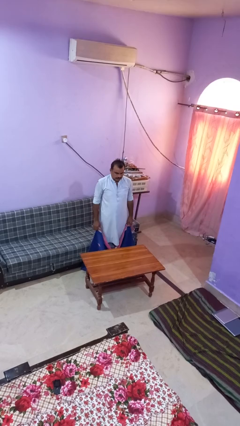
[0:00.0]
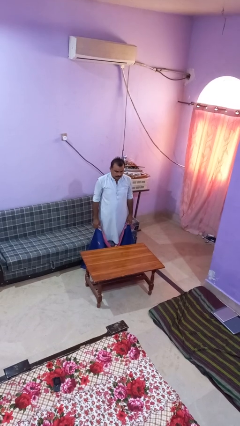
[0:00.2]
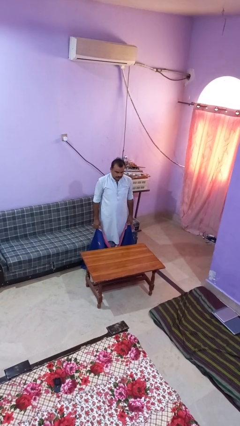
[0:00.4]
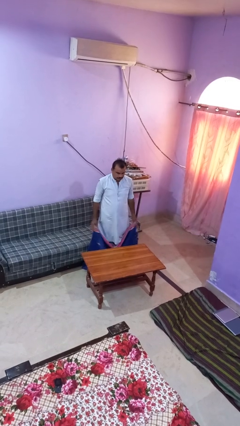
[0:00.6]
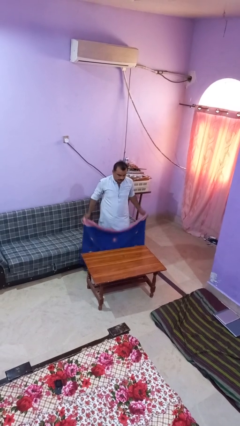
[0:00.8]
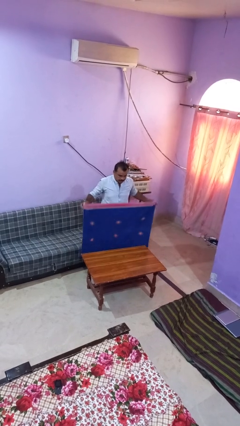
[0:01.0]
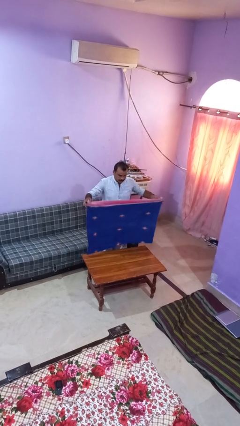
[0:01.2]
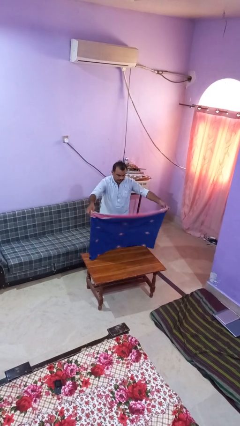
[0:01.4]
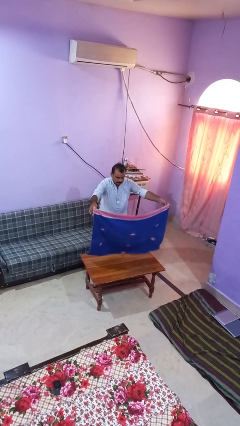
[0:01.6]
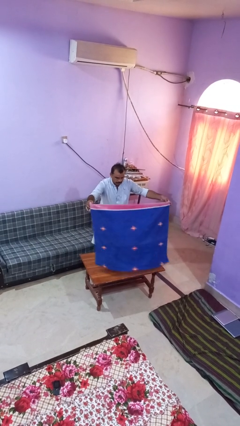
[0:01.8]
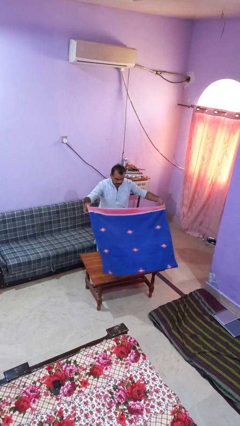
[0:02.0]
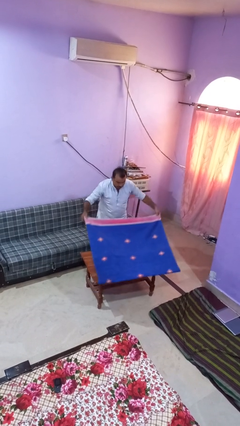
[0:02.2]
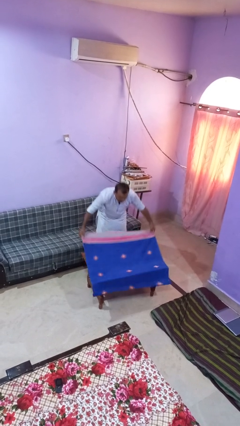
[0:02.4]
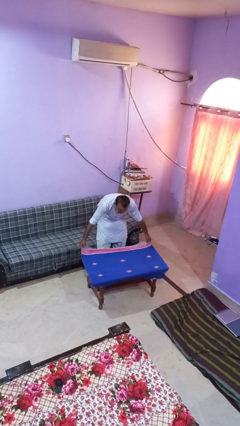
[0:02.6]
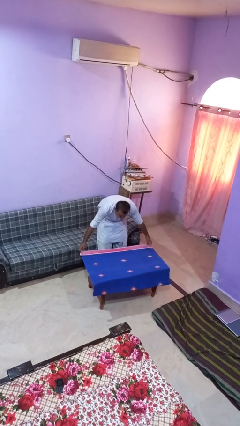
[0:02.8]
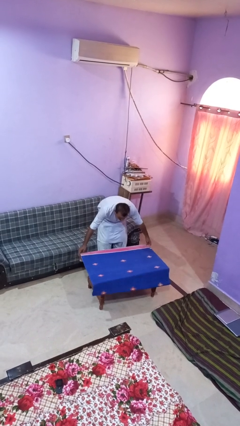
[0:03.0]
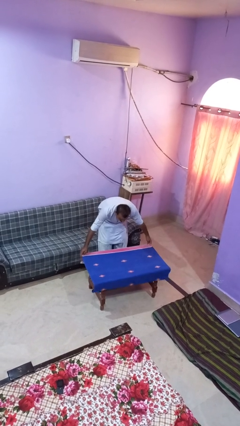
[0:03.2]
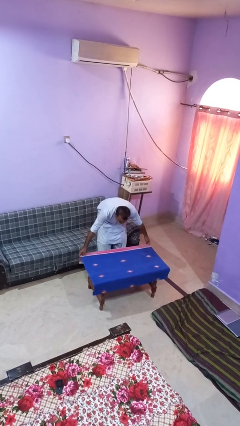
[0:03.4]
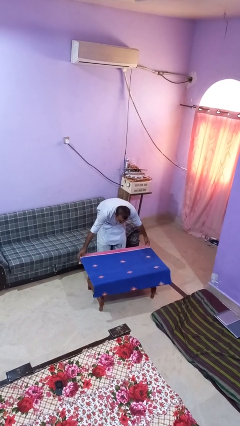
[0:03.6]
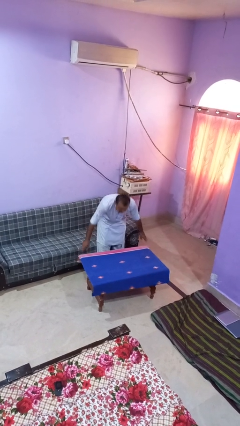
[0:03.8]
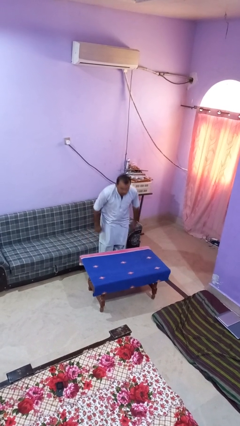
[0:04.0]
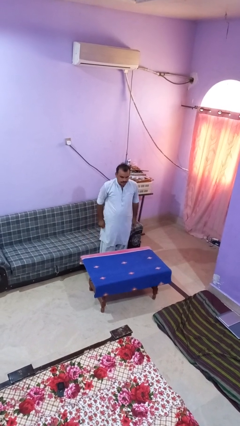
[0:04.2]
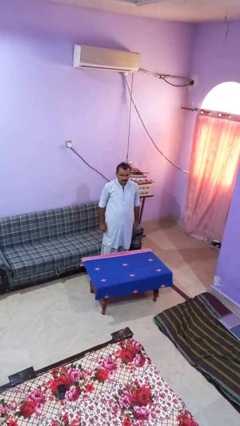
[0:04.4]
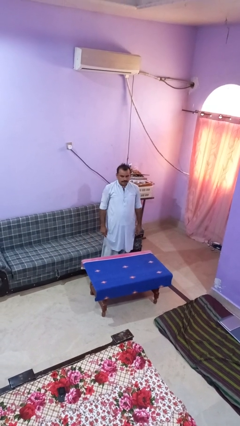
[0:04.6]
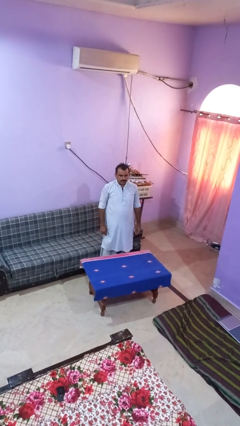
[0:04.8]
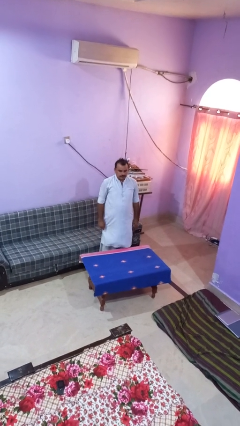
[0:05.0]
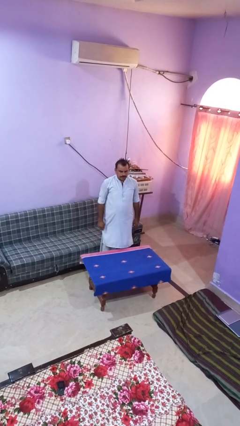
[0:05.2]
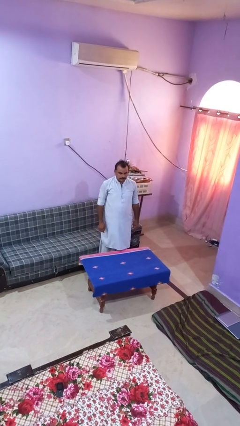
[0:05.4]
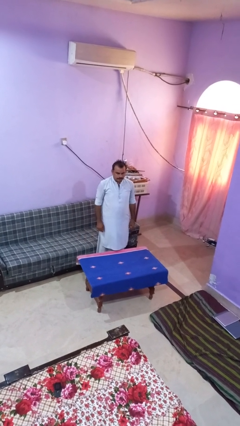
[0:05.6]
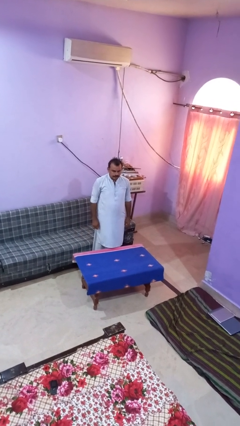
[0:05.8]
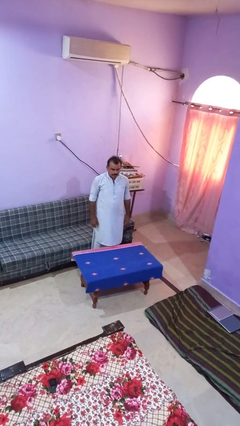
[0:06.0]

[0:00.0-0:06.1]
person spreads tablecloth

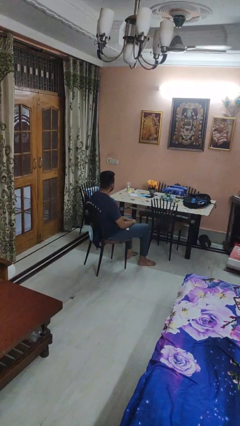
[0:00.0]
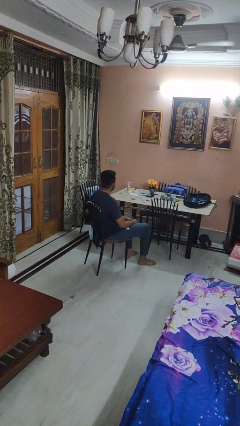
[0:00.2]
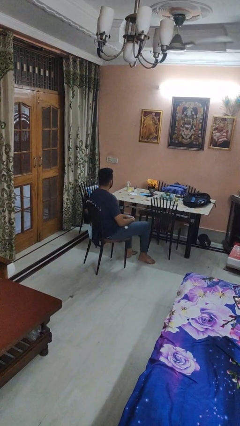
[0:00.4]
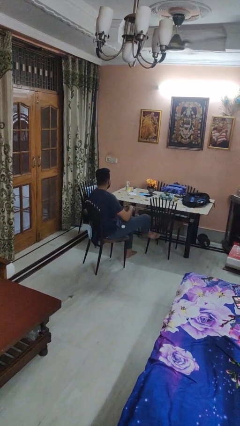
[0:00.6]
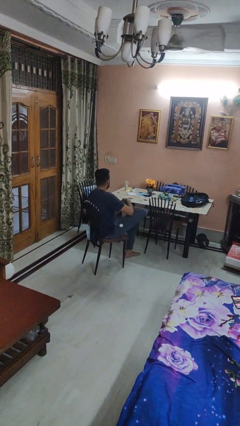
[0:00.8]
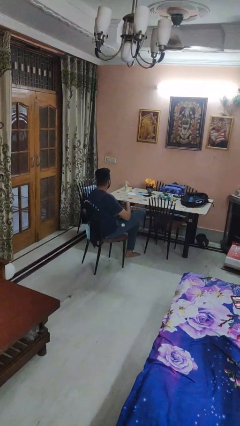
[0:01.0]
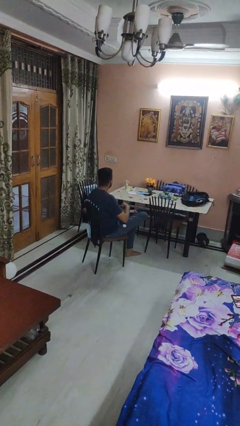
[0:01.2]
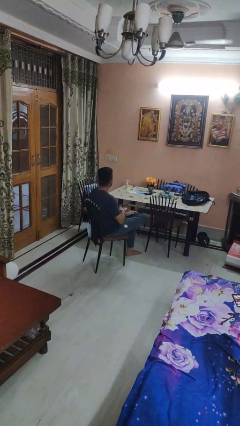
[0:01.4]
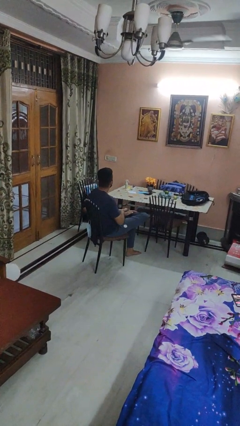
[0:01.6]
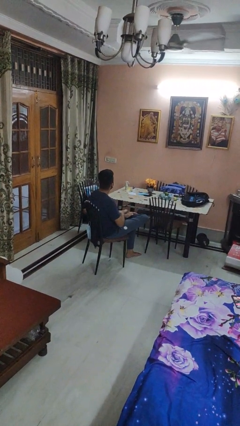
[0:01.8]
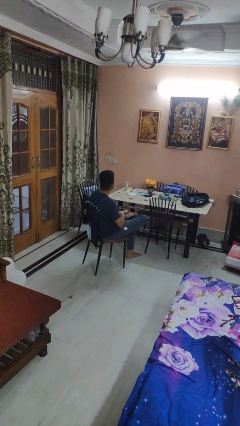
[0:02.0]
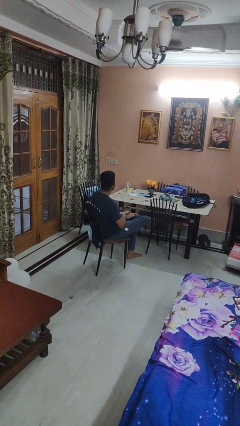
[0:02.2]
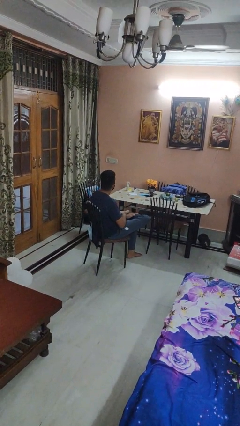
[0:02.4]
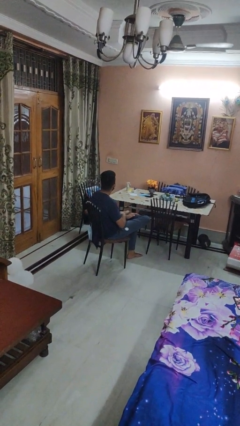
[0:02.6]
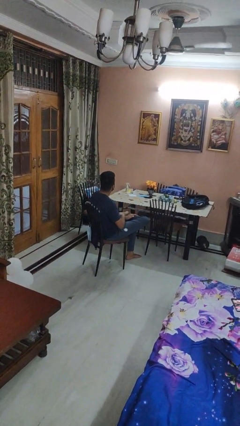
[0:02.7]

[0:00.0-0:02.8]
person crosses legs

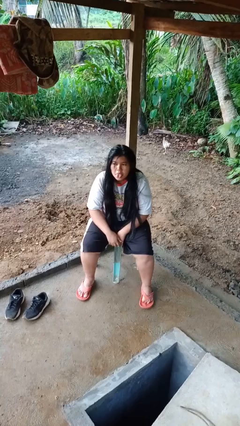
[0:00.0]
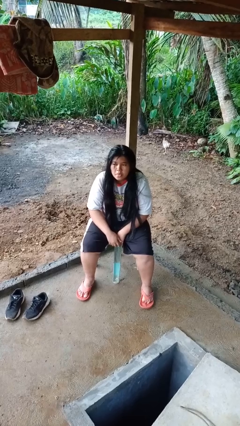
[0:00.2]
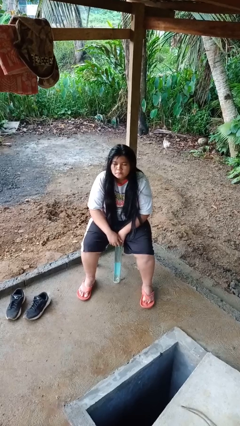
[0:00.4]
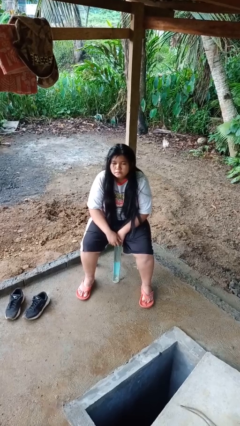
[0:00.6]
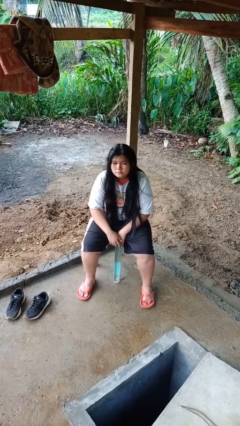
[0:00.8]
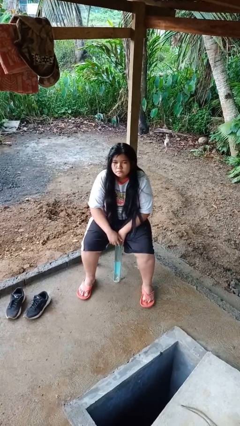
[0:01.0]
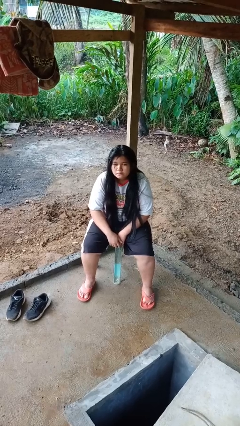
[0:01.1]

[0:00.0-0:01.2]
person sticks out tongue

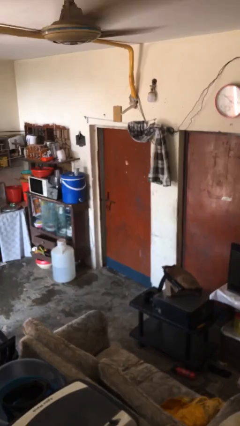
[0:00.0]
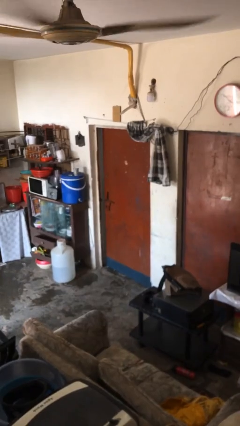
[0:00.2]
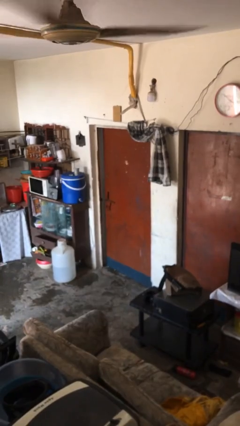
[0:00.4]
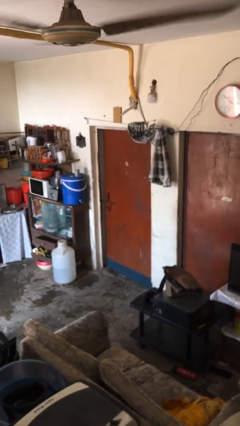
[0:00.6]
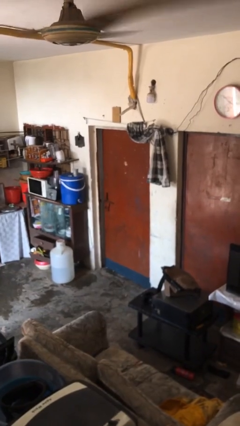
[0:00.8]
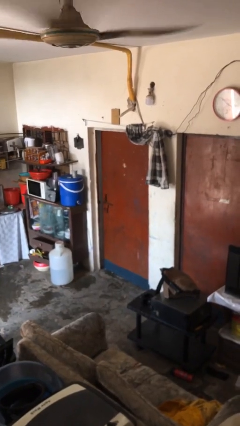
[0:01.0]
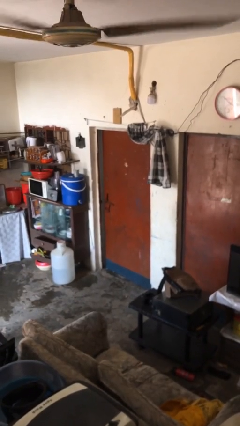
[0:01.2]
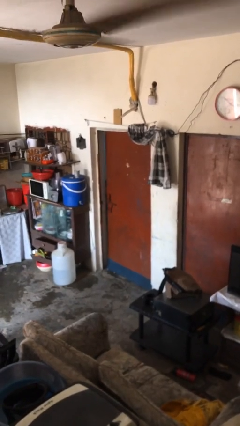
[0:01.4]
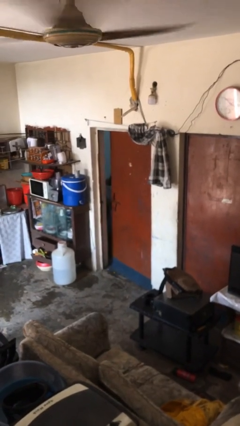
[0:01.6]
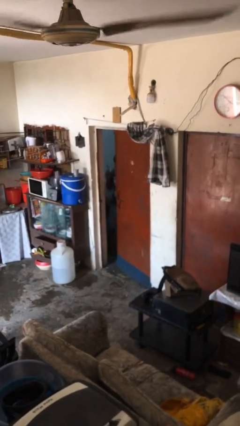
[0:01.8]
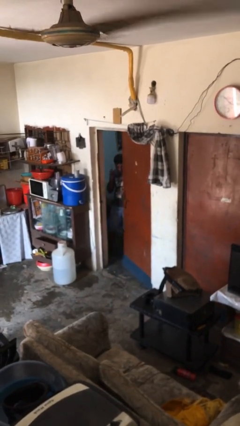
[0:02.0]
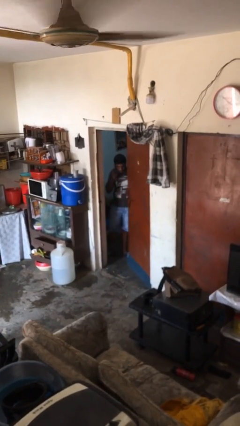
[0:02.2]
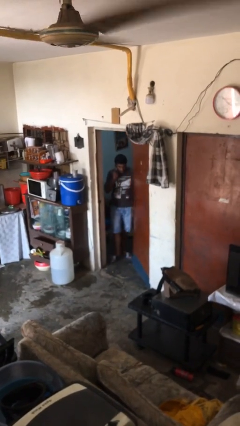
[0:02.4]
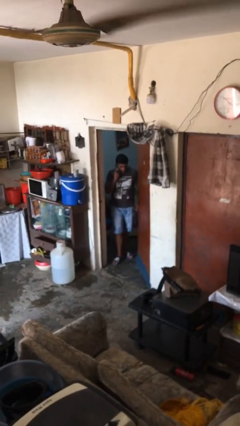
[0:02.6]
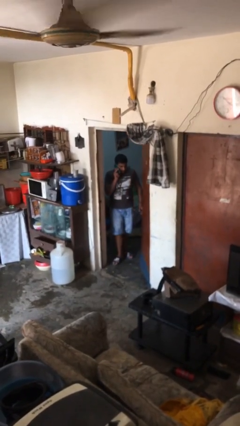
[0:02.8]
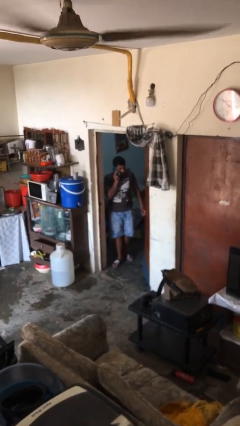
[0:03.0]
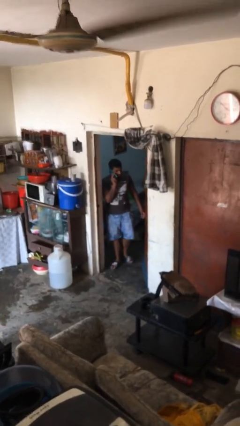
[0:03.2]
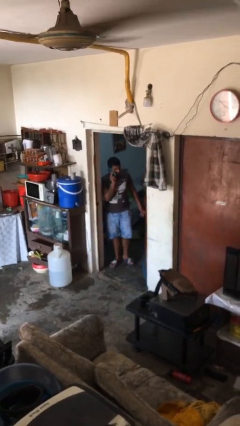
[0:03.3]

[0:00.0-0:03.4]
person opens facility door

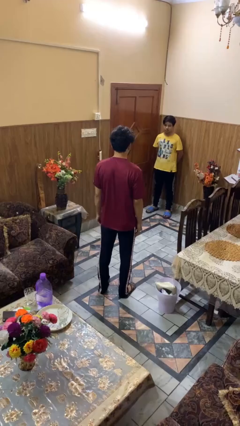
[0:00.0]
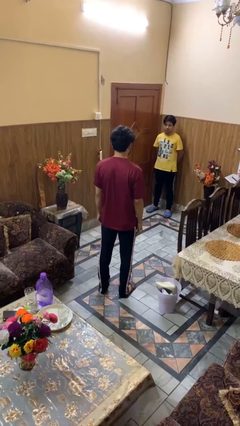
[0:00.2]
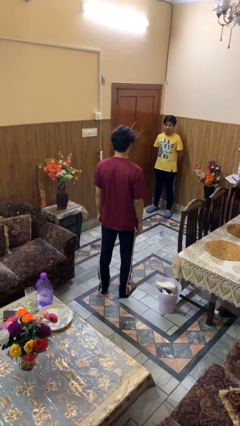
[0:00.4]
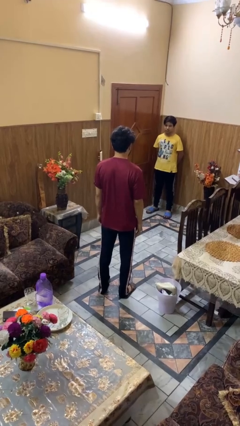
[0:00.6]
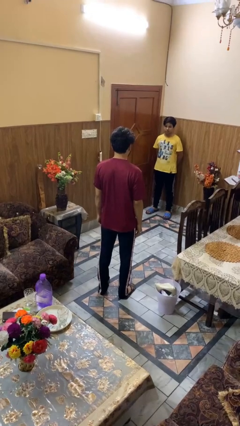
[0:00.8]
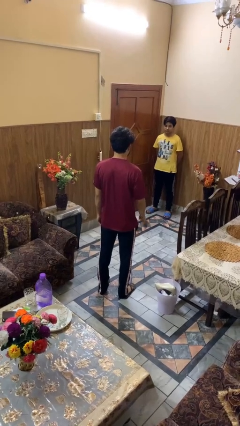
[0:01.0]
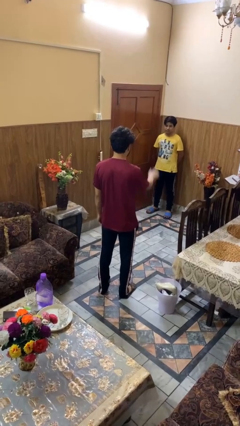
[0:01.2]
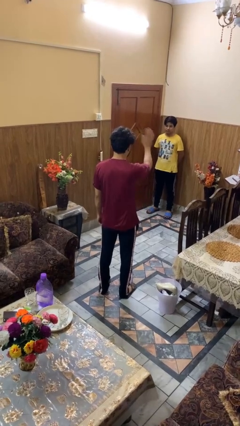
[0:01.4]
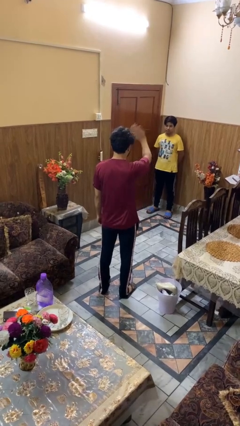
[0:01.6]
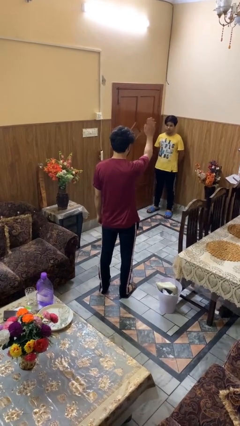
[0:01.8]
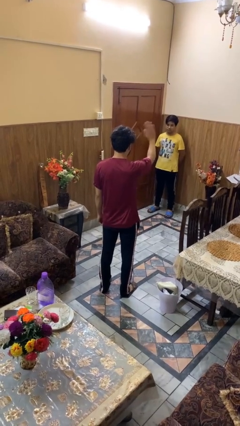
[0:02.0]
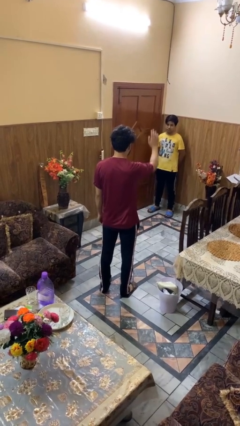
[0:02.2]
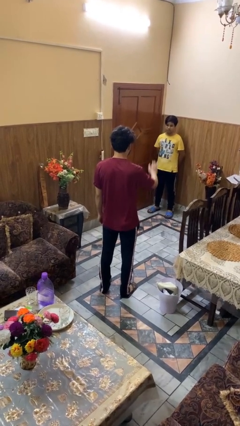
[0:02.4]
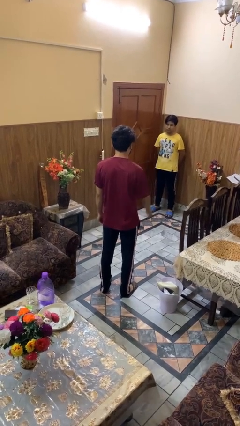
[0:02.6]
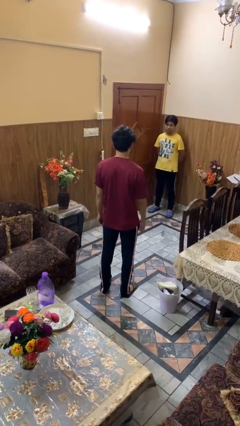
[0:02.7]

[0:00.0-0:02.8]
person waves at person

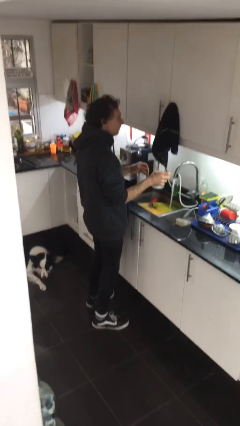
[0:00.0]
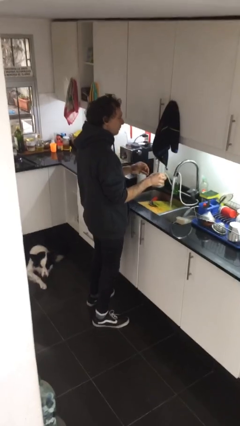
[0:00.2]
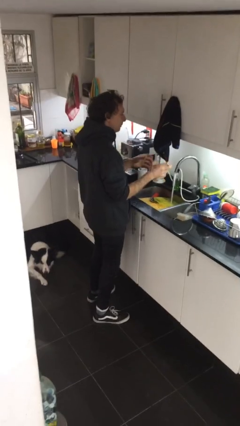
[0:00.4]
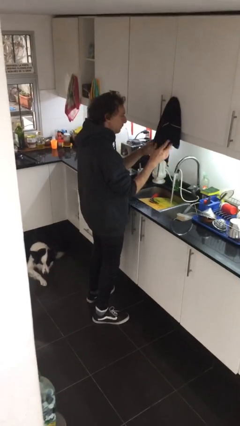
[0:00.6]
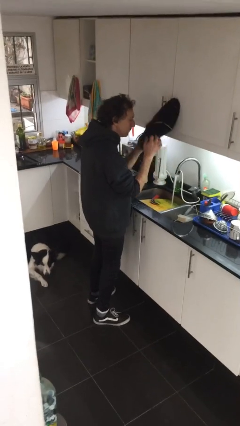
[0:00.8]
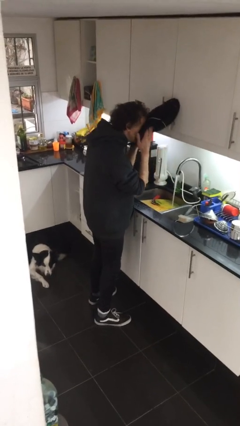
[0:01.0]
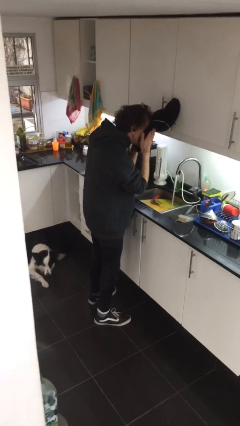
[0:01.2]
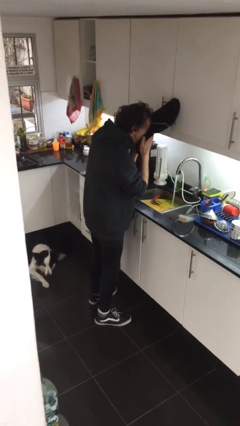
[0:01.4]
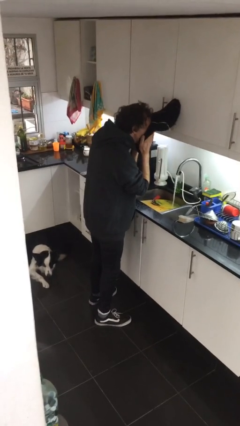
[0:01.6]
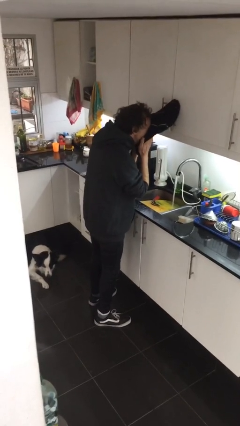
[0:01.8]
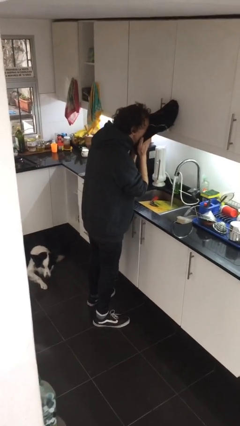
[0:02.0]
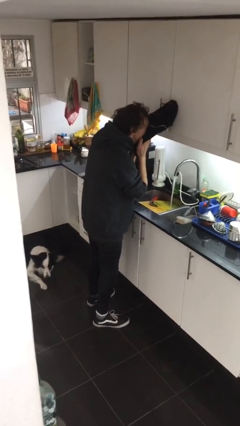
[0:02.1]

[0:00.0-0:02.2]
person dries face with towel
